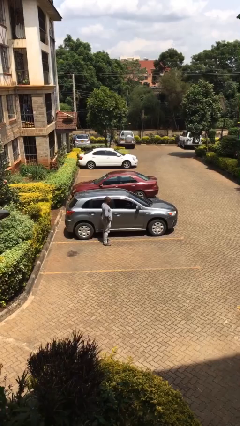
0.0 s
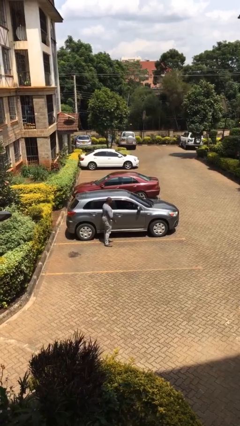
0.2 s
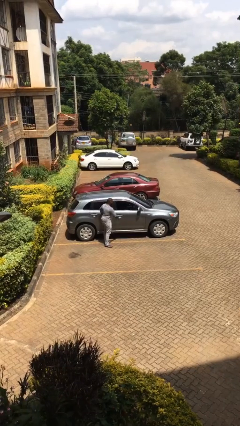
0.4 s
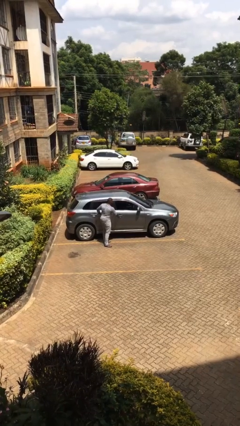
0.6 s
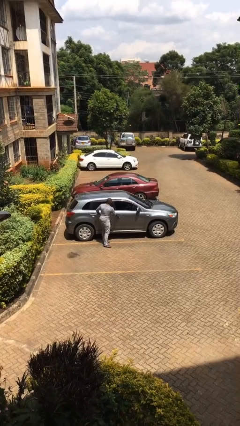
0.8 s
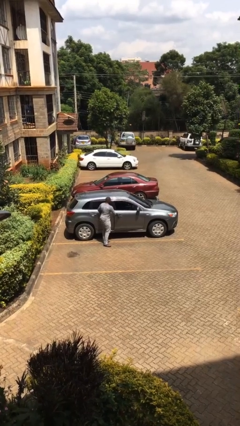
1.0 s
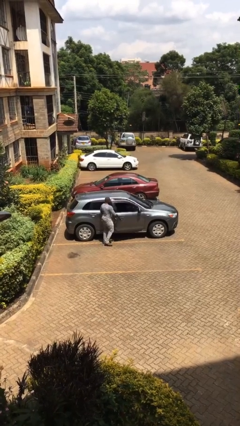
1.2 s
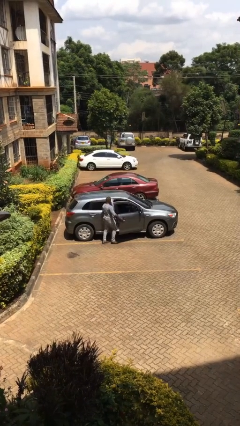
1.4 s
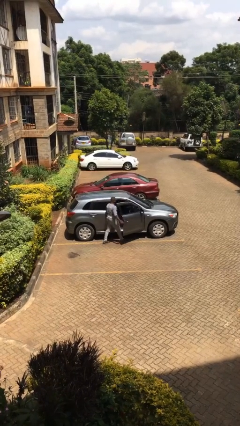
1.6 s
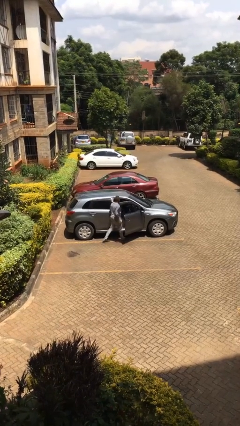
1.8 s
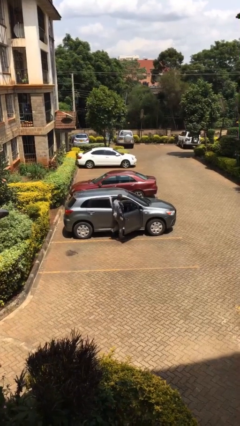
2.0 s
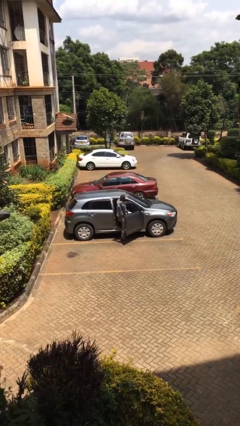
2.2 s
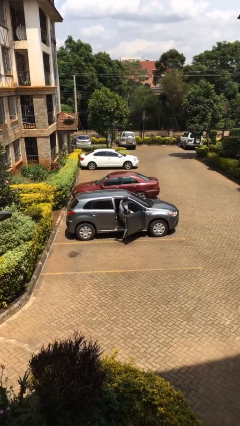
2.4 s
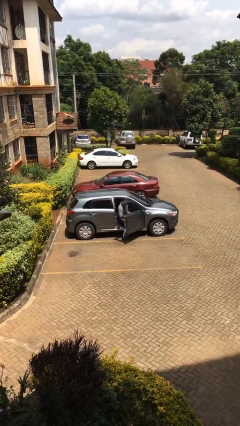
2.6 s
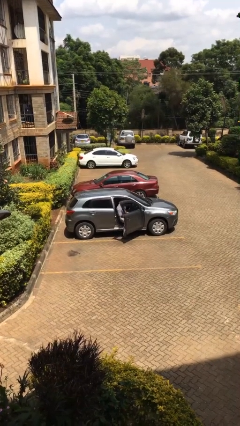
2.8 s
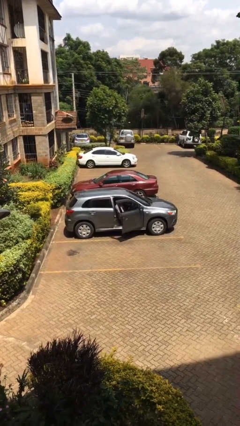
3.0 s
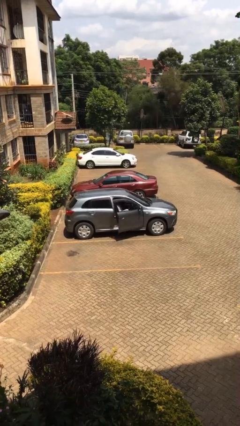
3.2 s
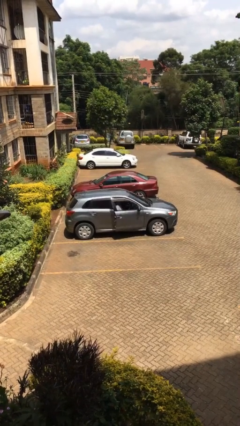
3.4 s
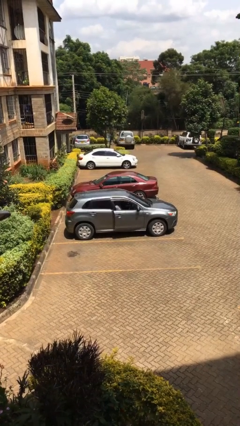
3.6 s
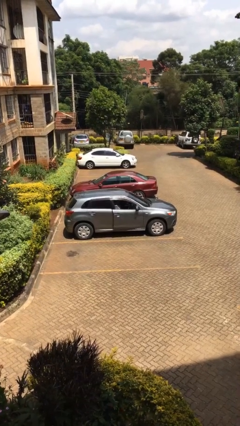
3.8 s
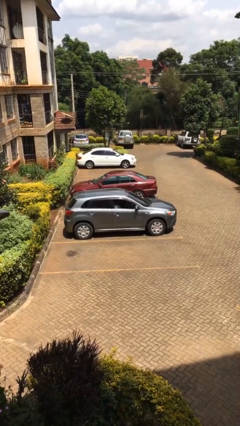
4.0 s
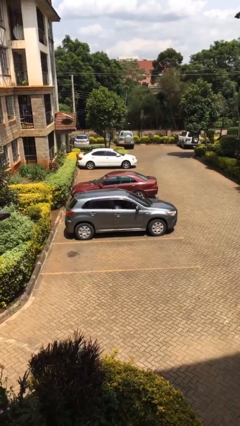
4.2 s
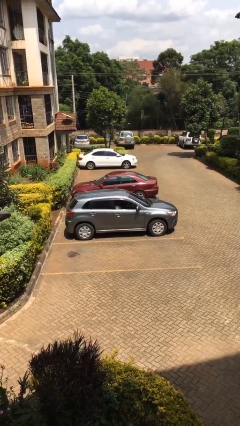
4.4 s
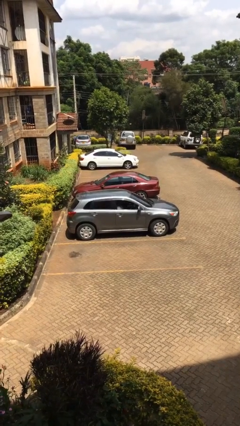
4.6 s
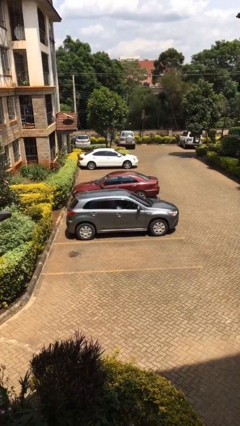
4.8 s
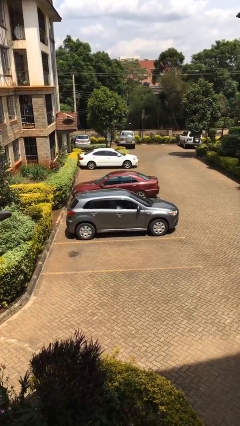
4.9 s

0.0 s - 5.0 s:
car picks up person

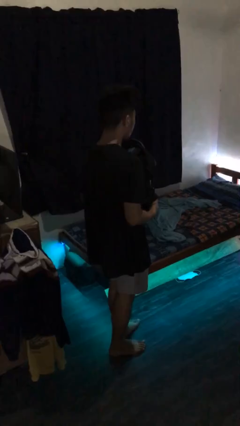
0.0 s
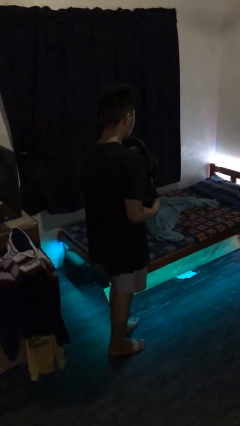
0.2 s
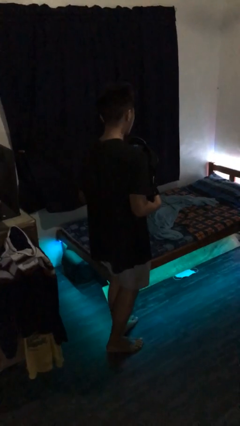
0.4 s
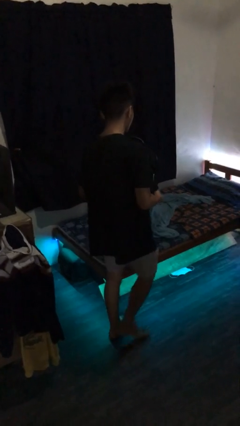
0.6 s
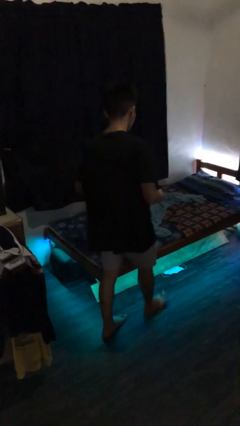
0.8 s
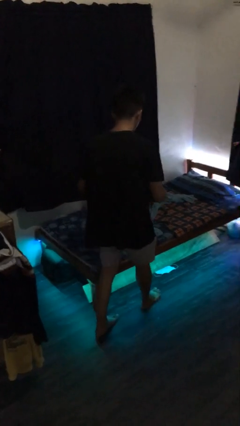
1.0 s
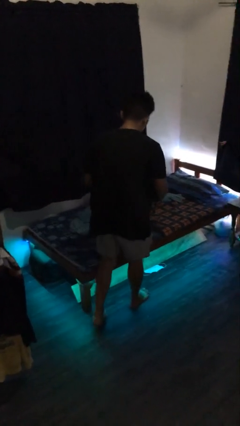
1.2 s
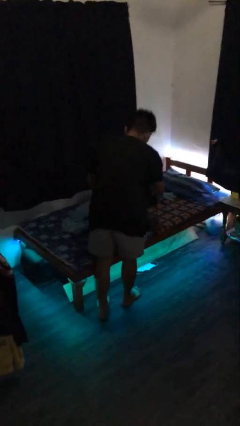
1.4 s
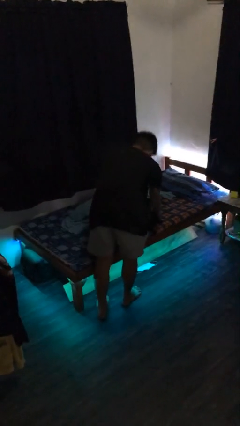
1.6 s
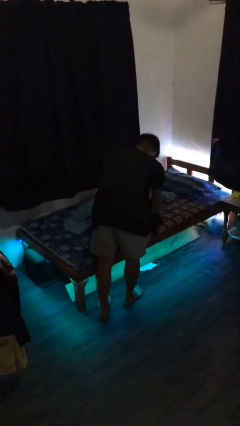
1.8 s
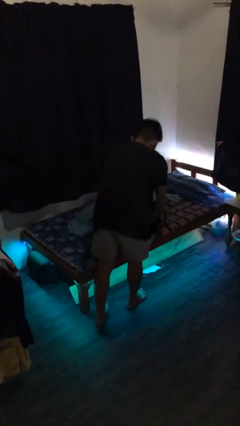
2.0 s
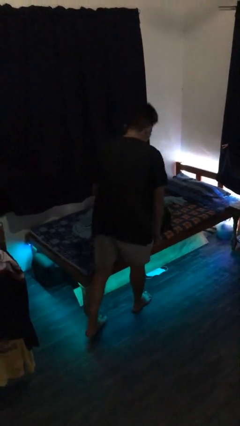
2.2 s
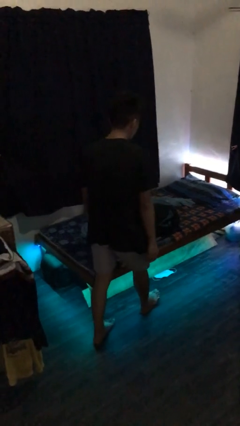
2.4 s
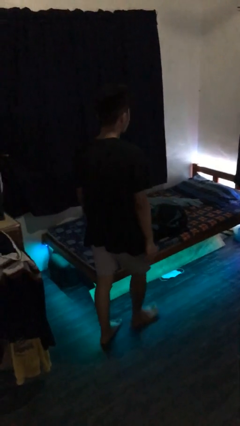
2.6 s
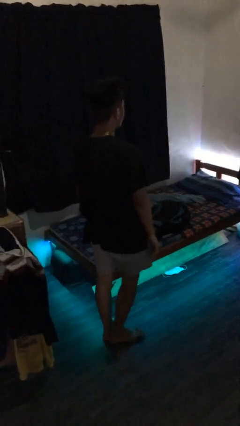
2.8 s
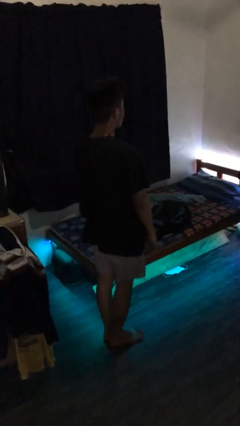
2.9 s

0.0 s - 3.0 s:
person puts down object on bed

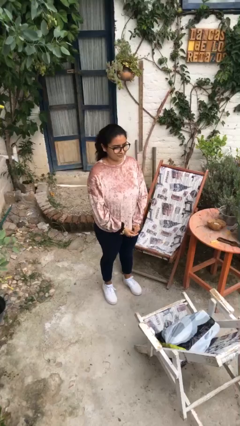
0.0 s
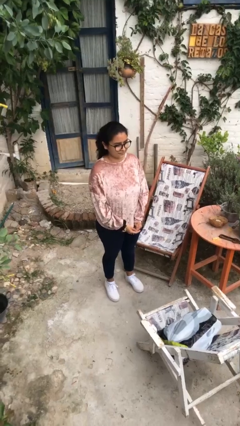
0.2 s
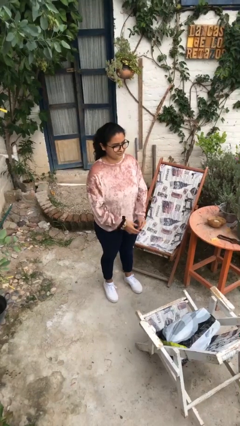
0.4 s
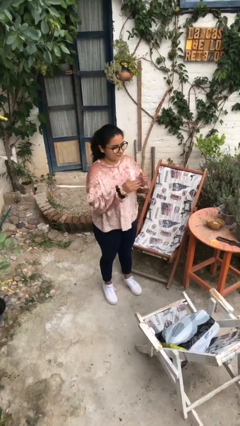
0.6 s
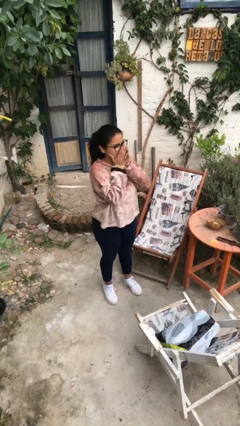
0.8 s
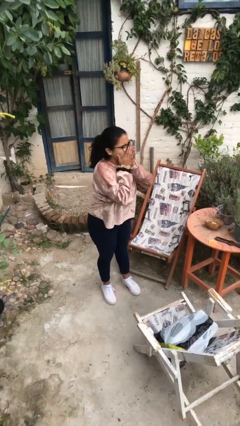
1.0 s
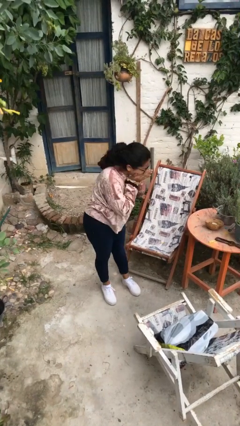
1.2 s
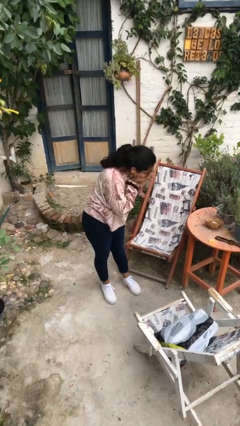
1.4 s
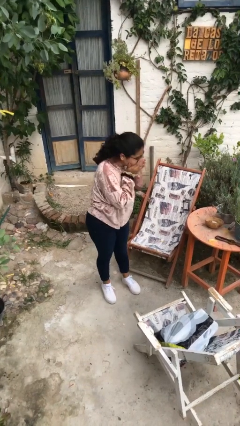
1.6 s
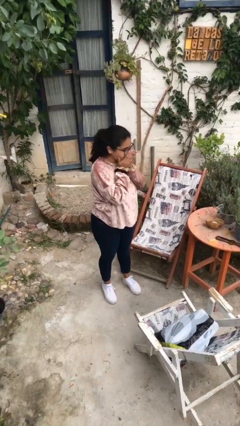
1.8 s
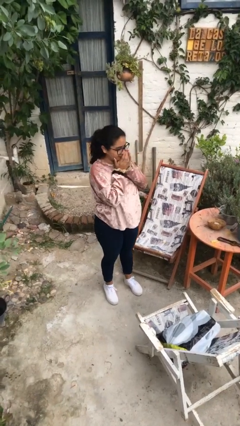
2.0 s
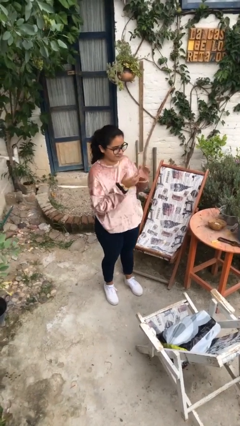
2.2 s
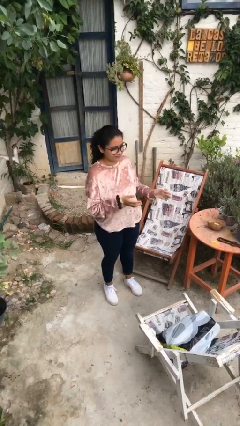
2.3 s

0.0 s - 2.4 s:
person sneezes into hand

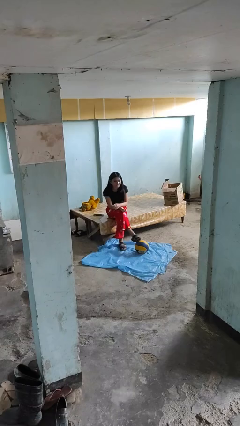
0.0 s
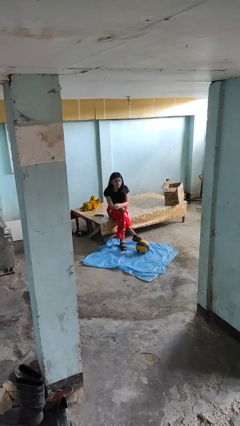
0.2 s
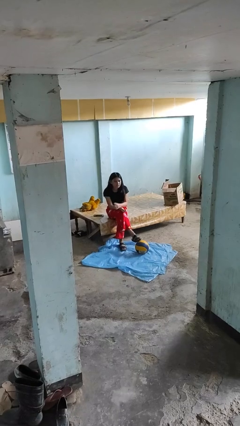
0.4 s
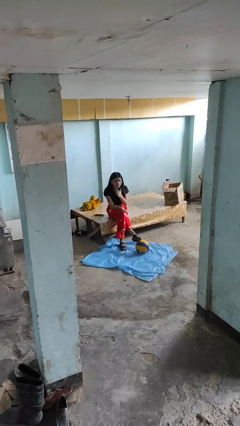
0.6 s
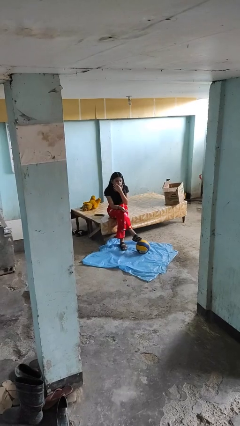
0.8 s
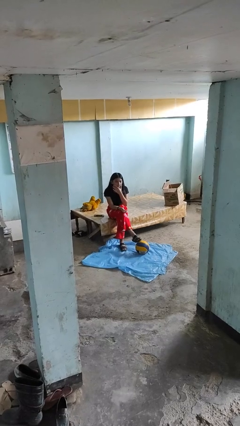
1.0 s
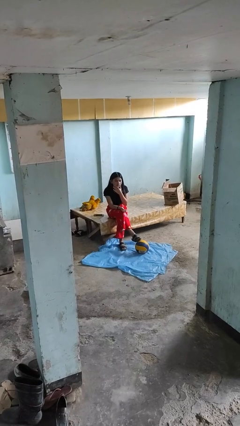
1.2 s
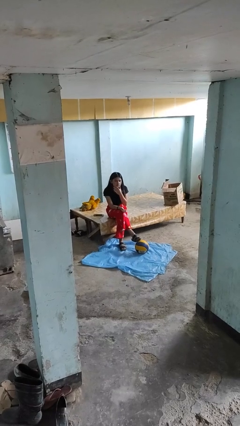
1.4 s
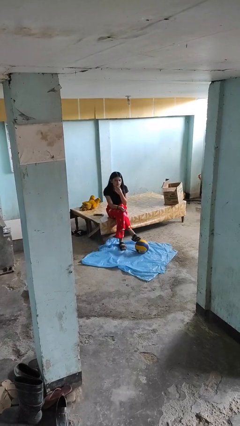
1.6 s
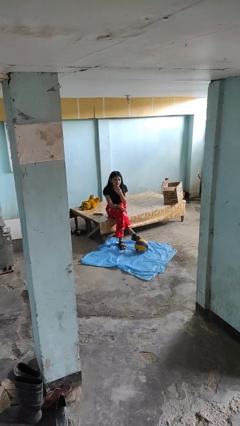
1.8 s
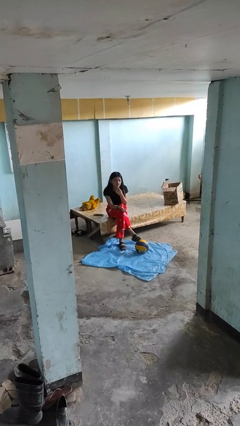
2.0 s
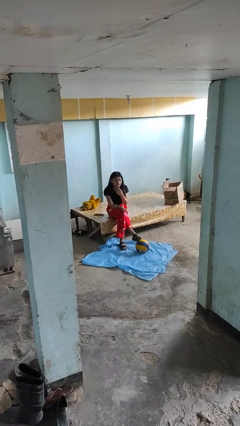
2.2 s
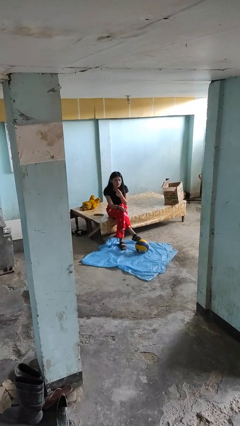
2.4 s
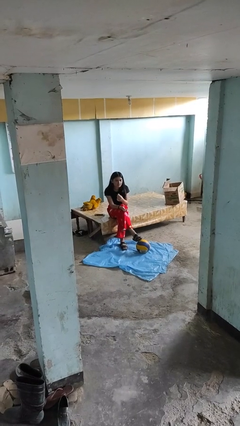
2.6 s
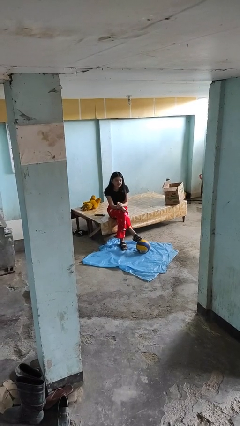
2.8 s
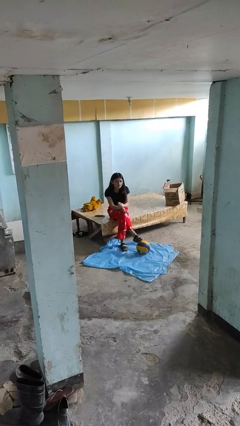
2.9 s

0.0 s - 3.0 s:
person strokes chin

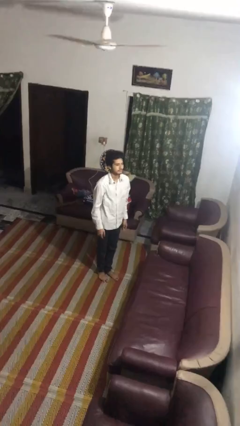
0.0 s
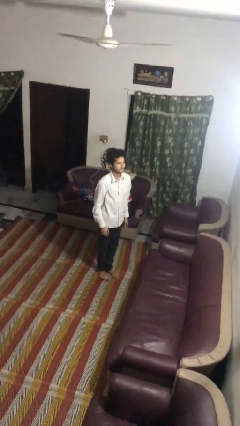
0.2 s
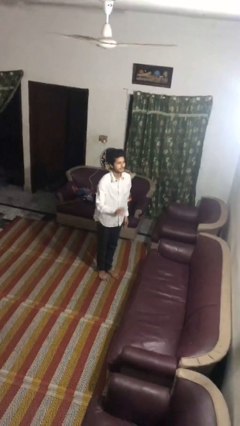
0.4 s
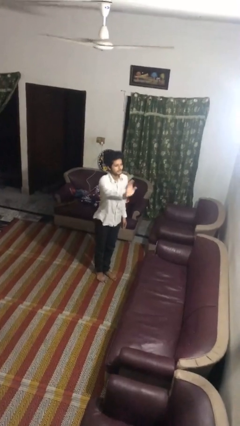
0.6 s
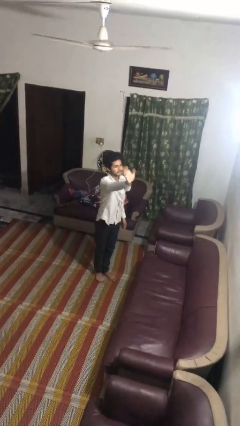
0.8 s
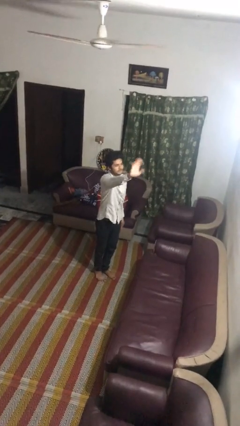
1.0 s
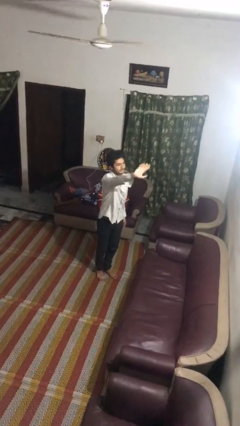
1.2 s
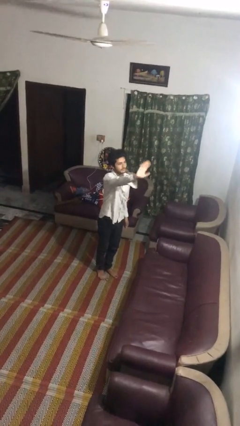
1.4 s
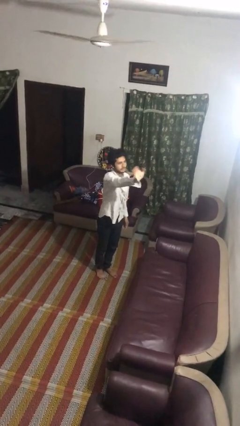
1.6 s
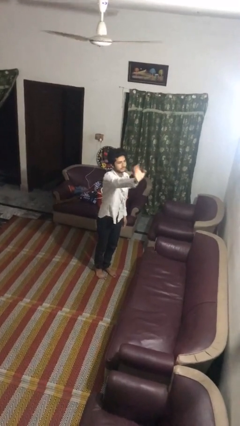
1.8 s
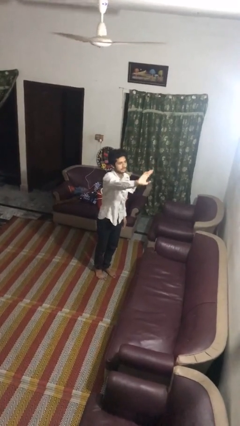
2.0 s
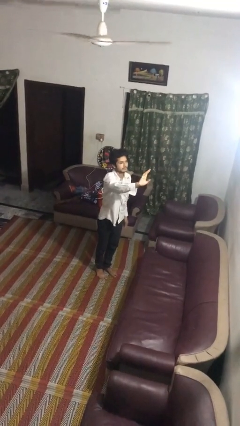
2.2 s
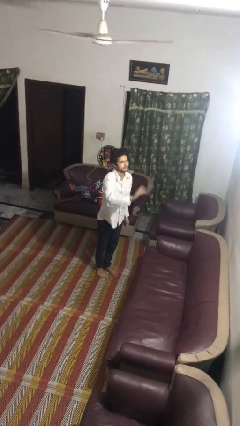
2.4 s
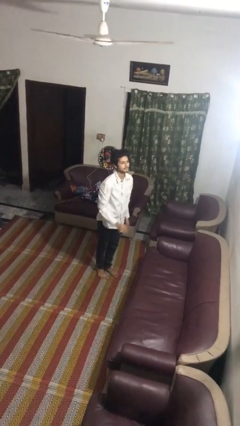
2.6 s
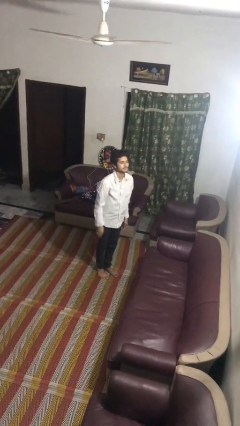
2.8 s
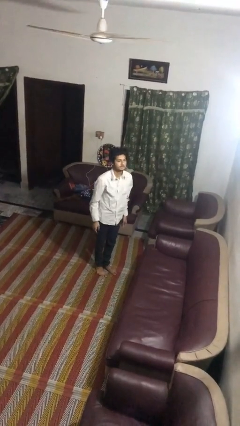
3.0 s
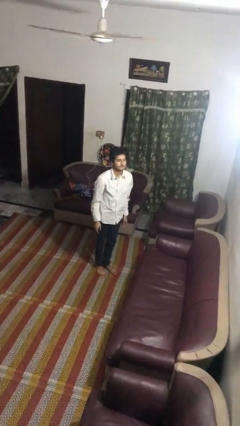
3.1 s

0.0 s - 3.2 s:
person waves at person

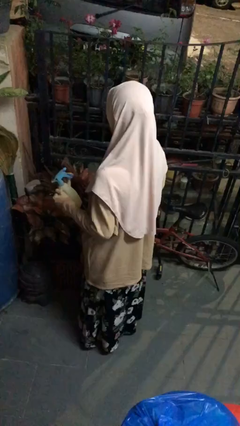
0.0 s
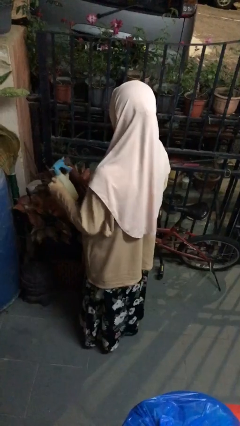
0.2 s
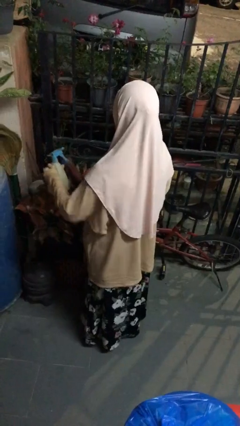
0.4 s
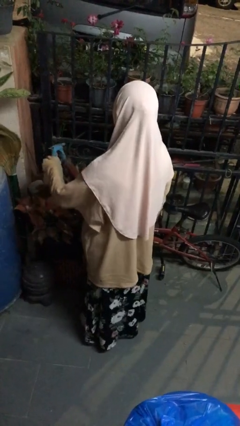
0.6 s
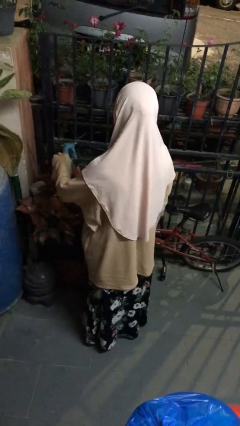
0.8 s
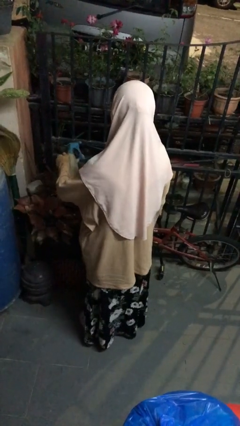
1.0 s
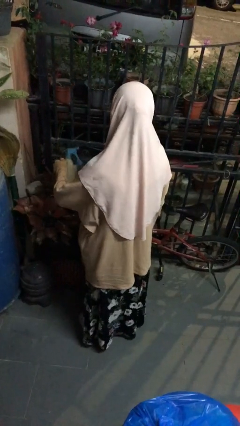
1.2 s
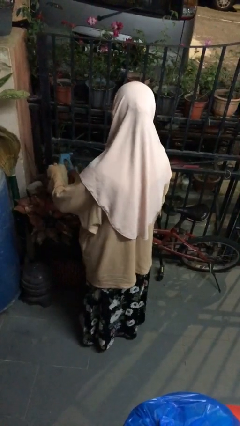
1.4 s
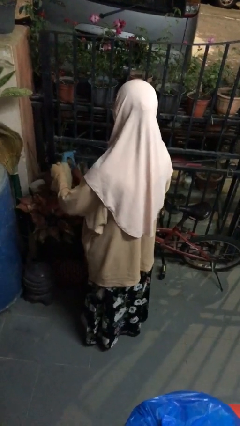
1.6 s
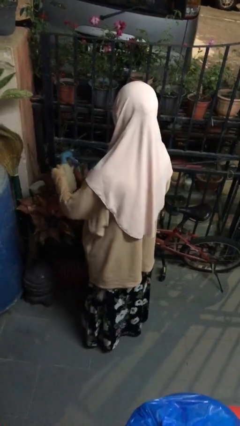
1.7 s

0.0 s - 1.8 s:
person waters houseplant
